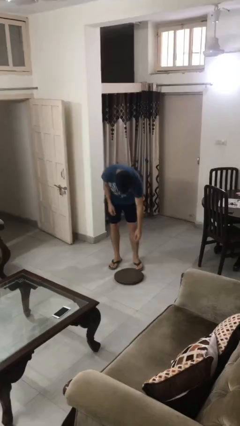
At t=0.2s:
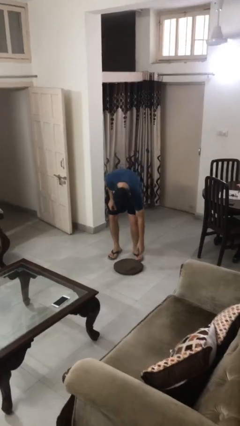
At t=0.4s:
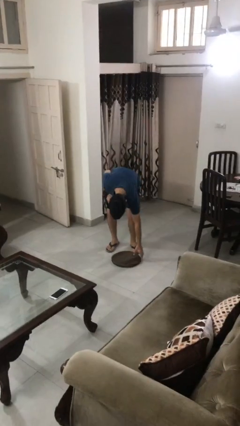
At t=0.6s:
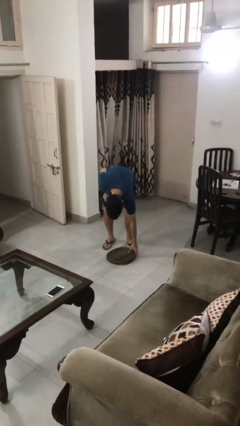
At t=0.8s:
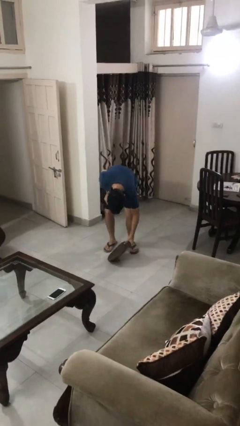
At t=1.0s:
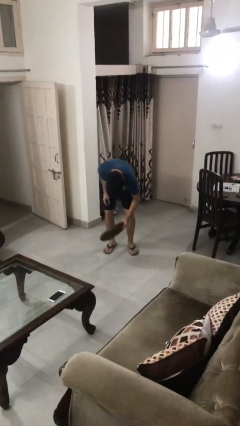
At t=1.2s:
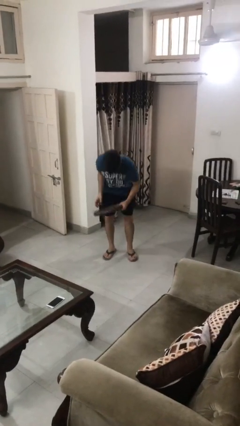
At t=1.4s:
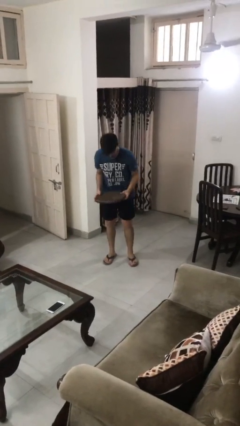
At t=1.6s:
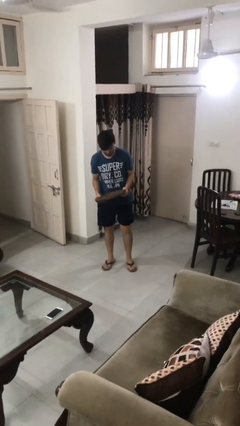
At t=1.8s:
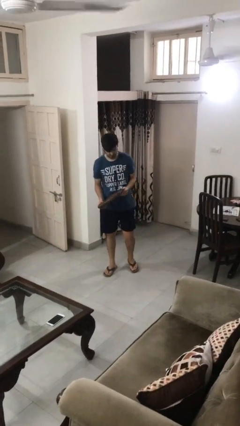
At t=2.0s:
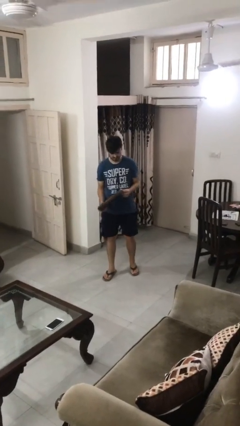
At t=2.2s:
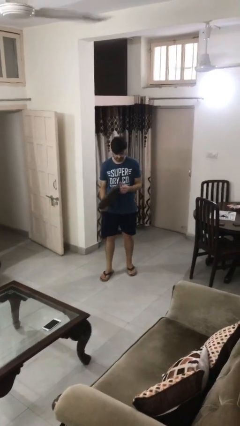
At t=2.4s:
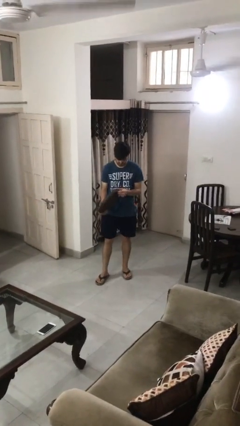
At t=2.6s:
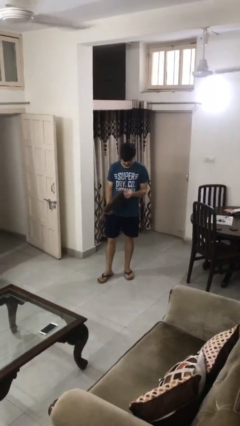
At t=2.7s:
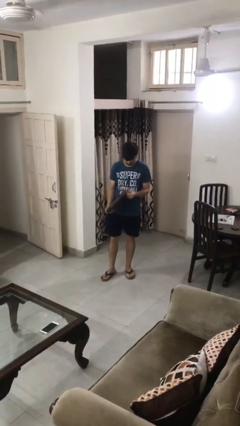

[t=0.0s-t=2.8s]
person picks up object from floor

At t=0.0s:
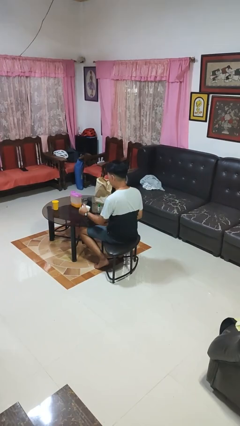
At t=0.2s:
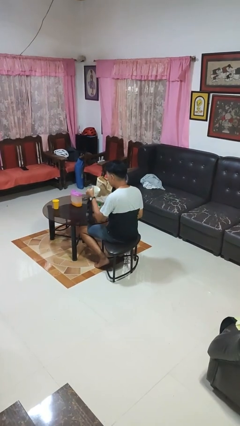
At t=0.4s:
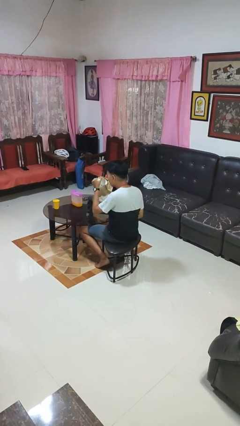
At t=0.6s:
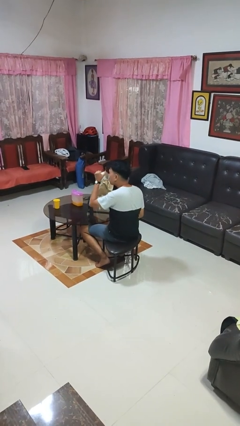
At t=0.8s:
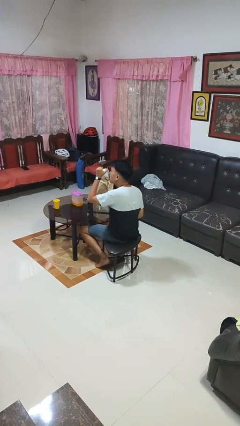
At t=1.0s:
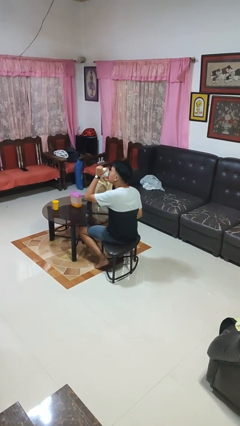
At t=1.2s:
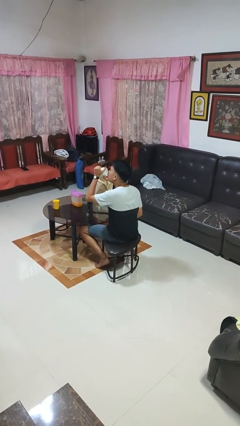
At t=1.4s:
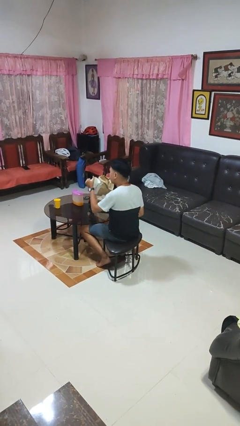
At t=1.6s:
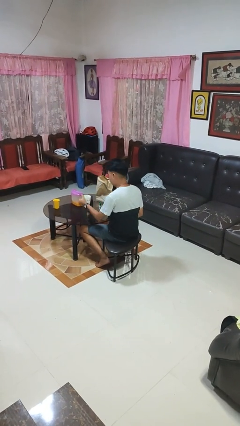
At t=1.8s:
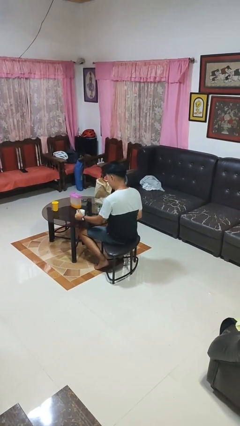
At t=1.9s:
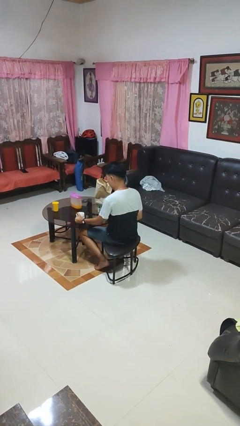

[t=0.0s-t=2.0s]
person drinks from mug

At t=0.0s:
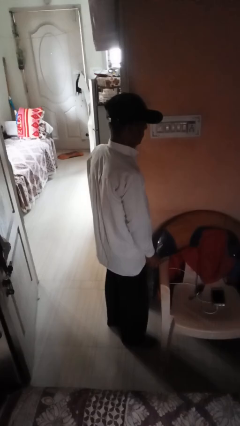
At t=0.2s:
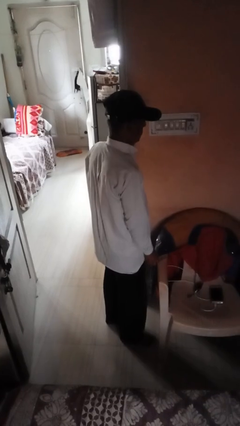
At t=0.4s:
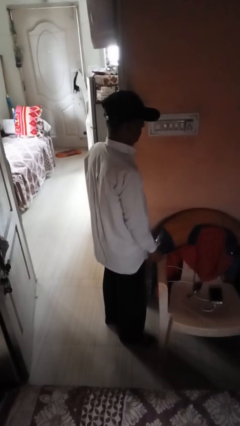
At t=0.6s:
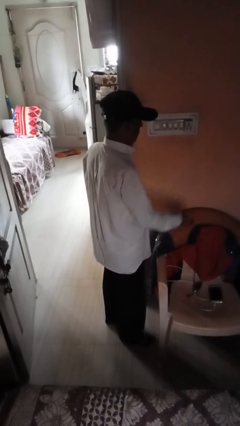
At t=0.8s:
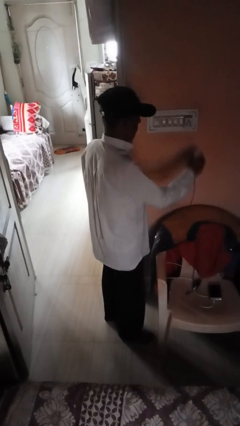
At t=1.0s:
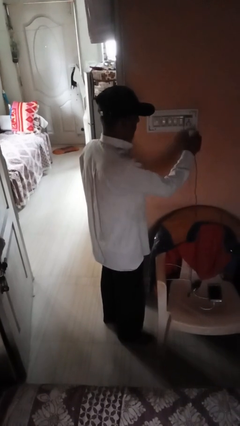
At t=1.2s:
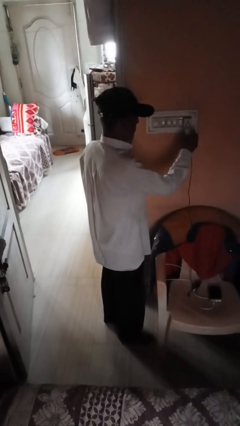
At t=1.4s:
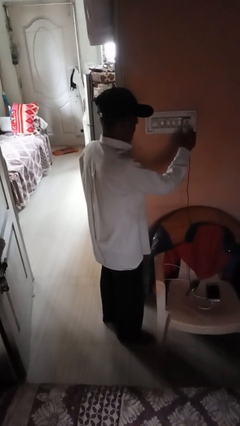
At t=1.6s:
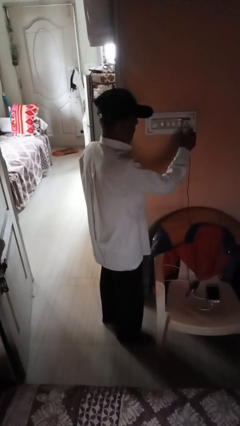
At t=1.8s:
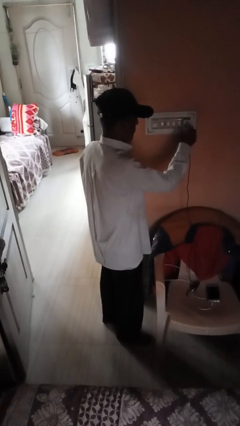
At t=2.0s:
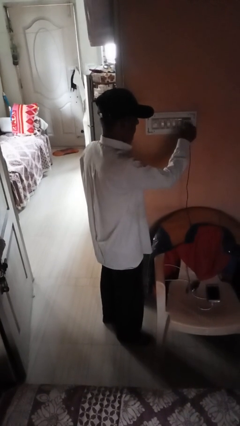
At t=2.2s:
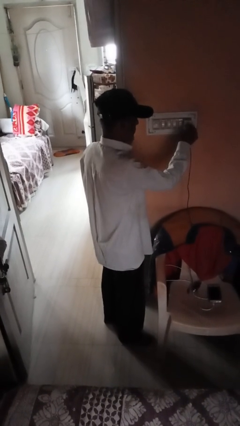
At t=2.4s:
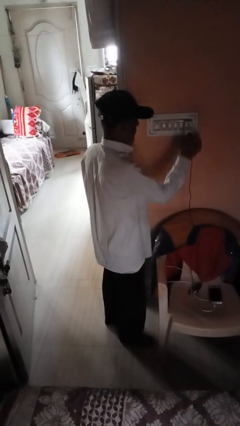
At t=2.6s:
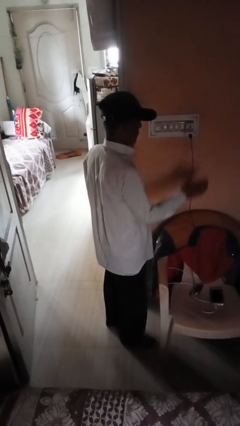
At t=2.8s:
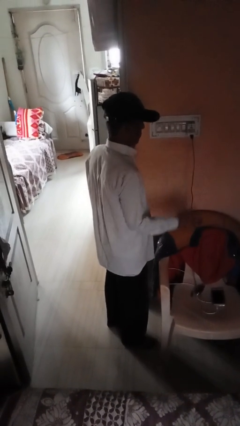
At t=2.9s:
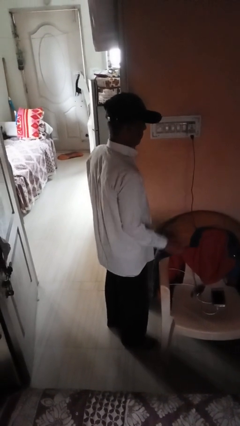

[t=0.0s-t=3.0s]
person plugs into electrical socket

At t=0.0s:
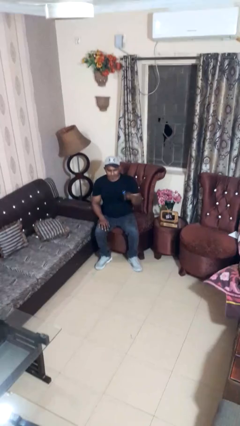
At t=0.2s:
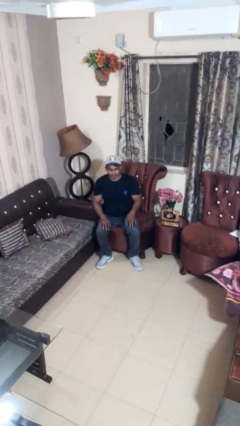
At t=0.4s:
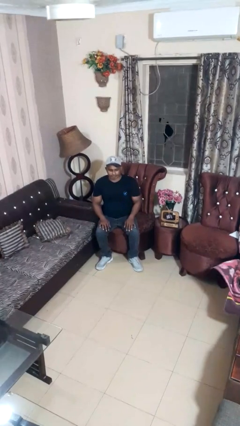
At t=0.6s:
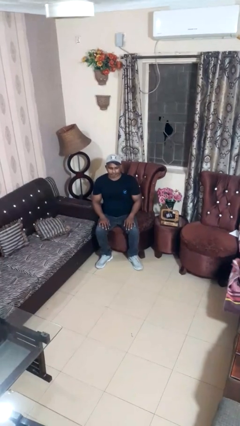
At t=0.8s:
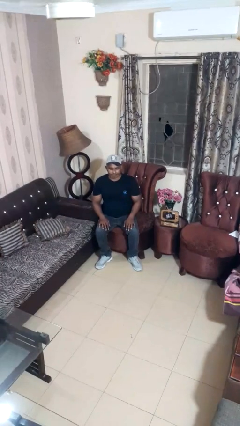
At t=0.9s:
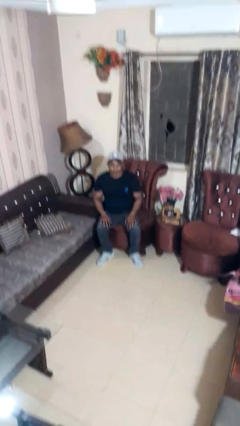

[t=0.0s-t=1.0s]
person gestures lower hand

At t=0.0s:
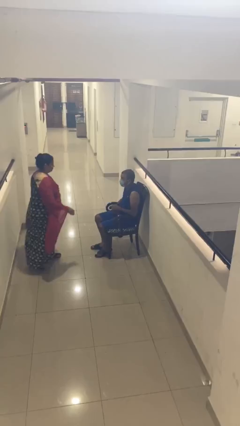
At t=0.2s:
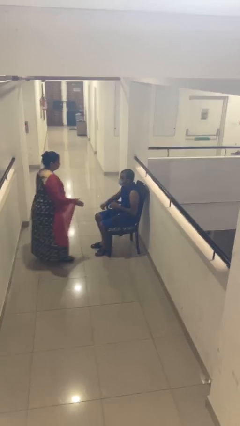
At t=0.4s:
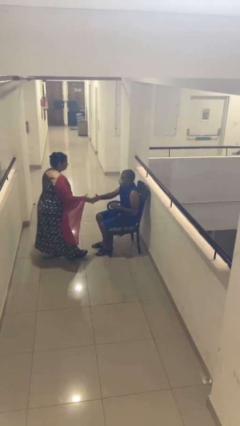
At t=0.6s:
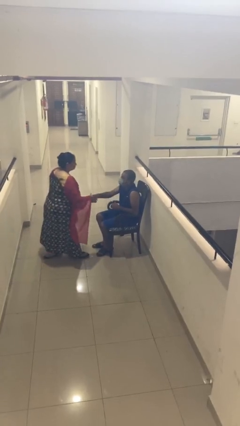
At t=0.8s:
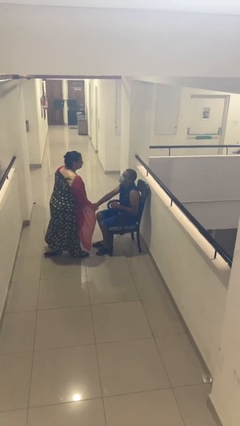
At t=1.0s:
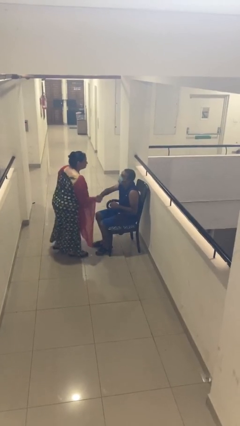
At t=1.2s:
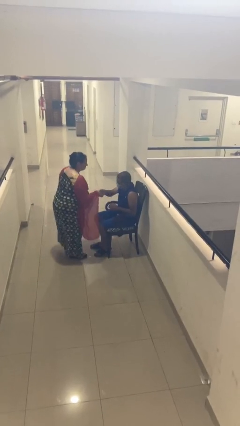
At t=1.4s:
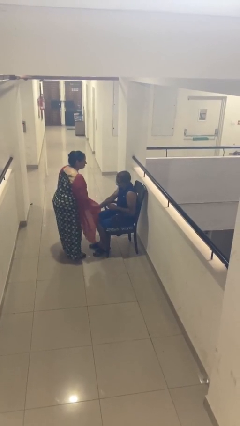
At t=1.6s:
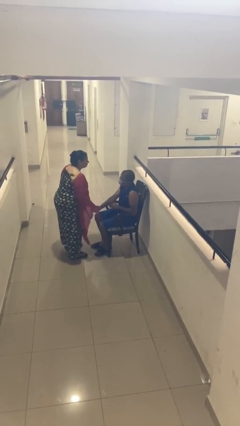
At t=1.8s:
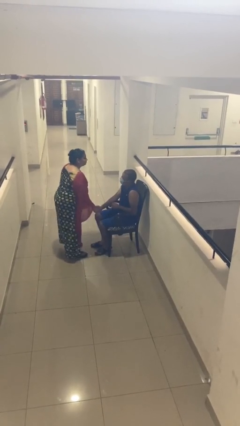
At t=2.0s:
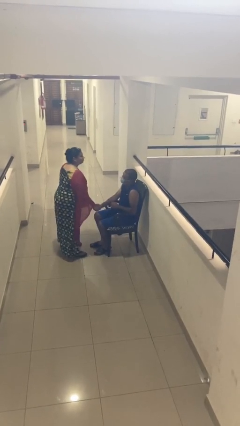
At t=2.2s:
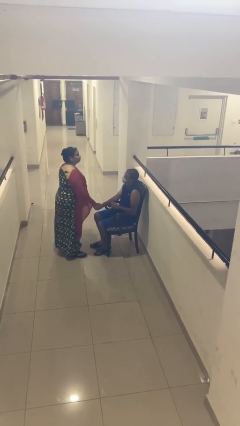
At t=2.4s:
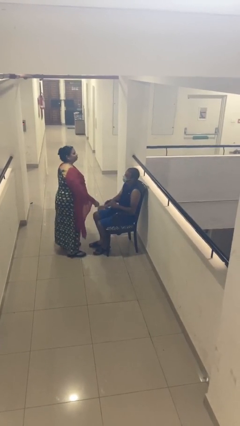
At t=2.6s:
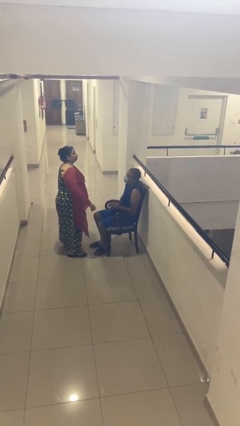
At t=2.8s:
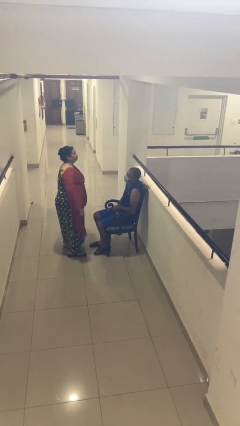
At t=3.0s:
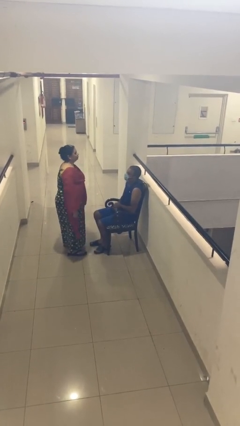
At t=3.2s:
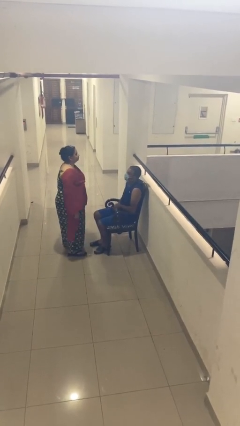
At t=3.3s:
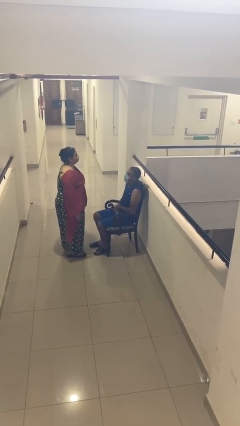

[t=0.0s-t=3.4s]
person shakes hand

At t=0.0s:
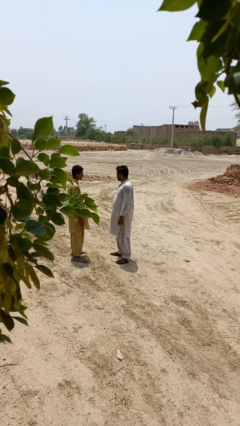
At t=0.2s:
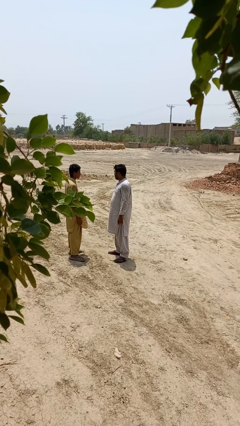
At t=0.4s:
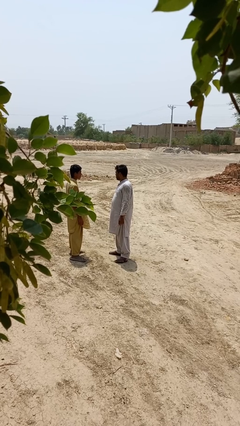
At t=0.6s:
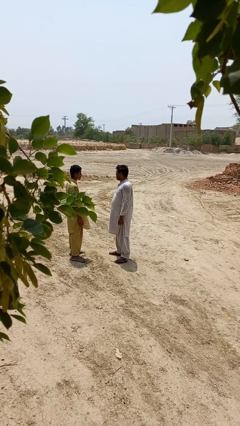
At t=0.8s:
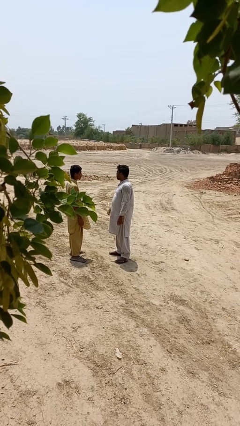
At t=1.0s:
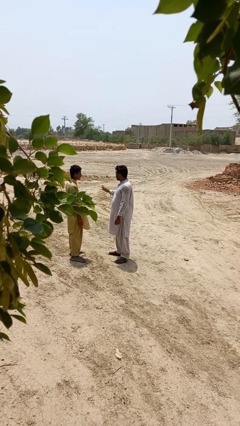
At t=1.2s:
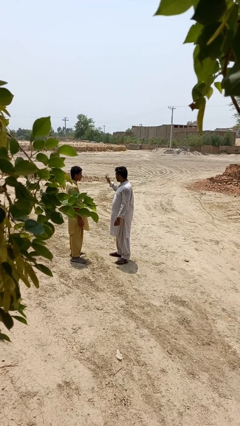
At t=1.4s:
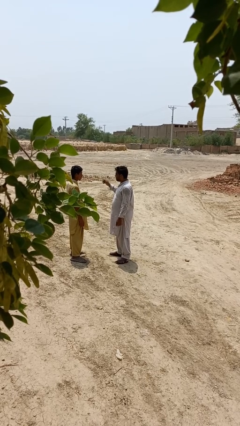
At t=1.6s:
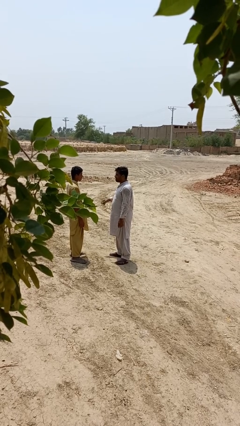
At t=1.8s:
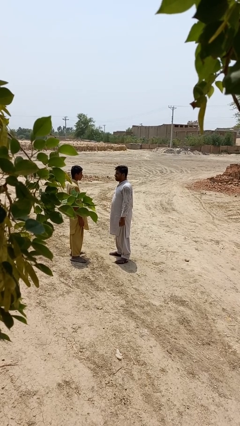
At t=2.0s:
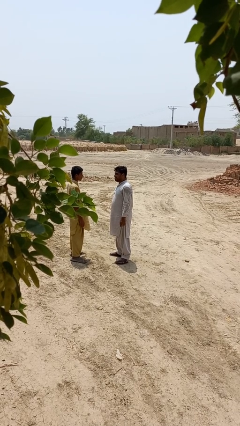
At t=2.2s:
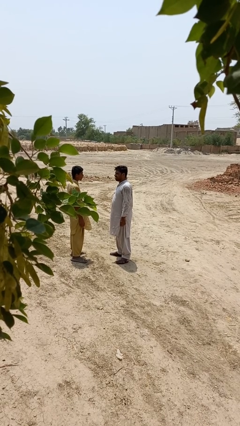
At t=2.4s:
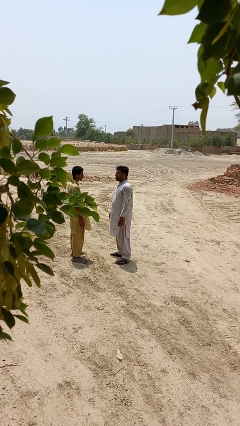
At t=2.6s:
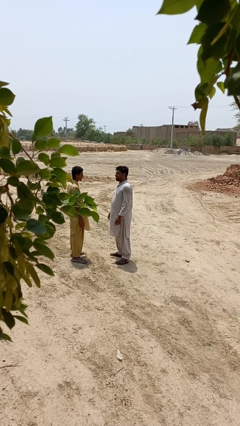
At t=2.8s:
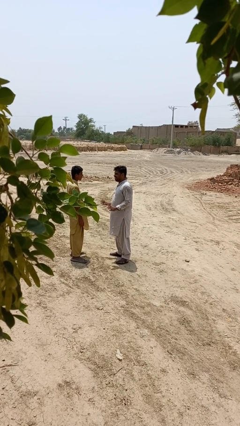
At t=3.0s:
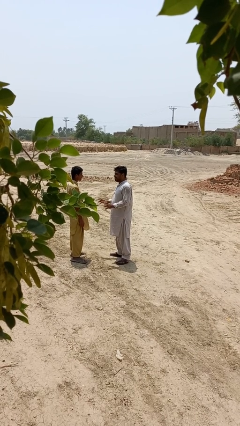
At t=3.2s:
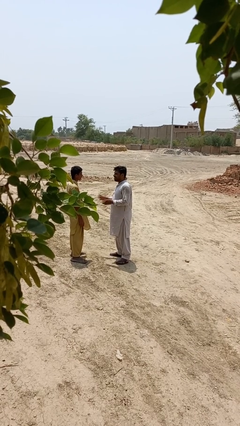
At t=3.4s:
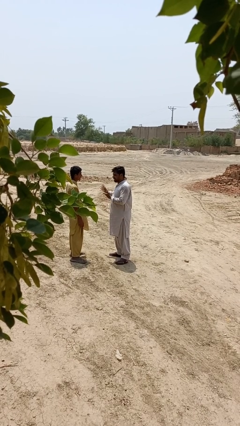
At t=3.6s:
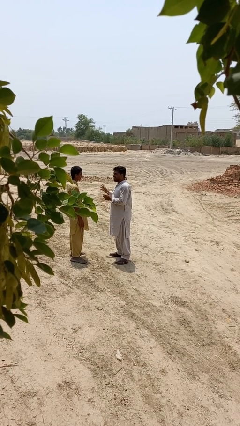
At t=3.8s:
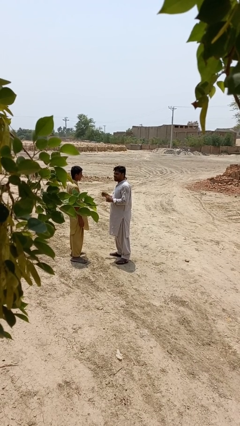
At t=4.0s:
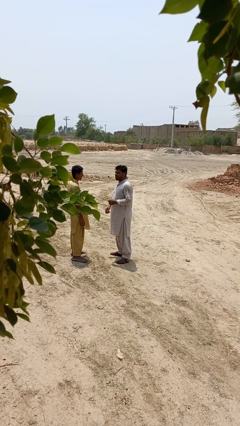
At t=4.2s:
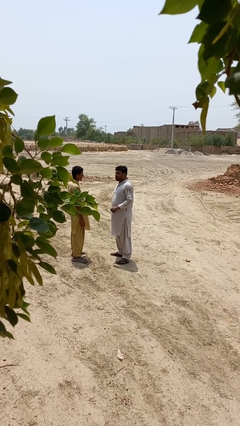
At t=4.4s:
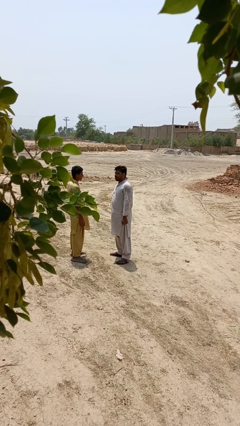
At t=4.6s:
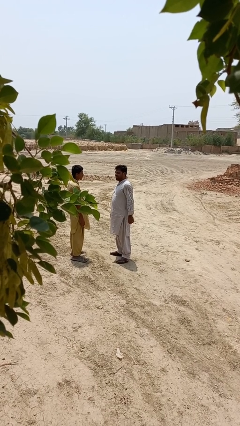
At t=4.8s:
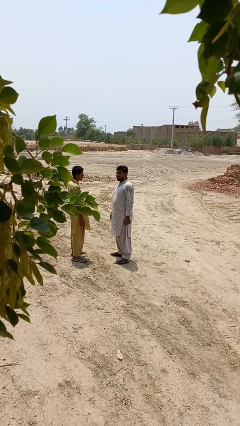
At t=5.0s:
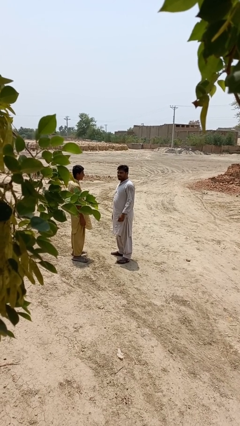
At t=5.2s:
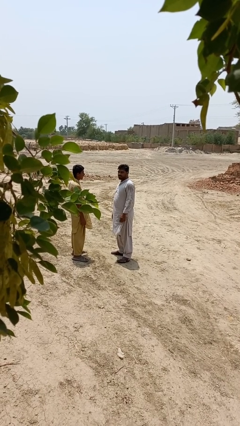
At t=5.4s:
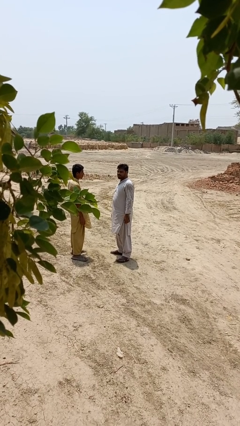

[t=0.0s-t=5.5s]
person laughs with person
